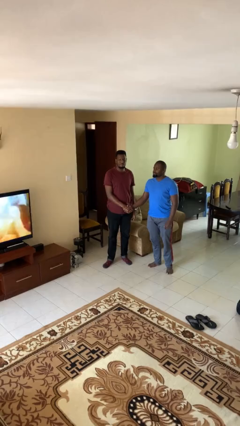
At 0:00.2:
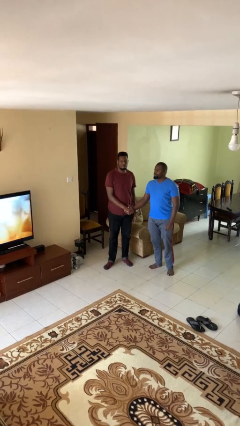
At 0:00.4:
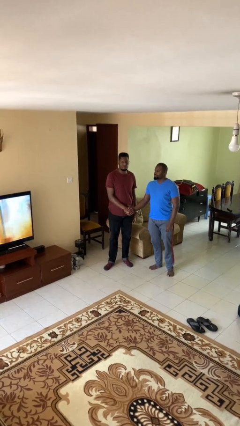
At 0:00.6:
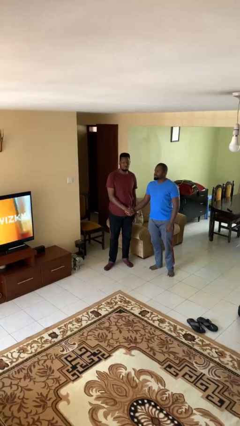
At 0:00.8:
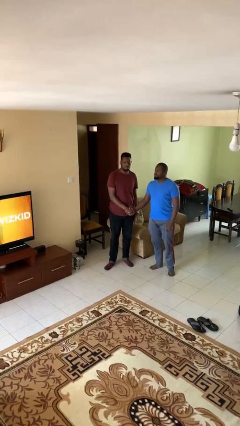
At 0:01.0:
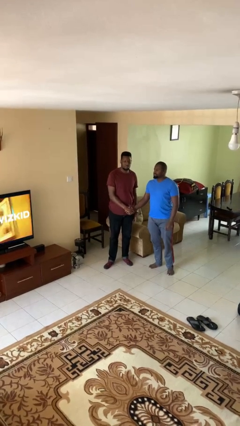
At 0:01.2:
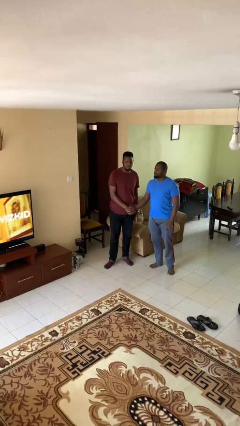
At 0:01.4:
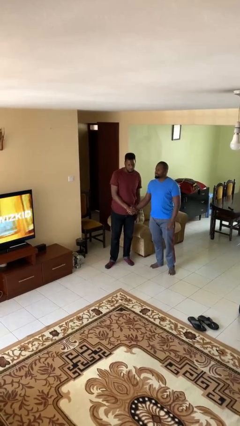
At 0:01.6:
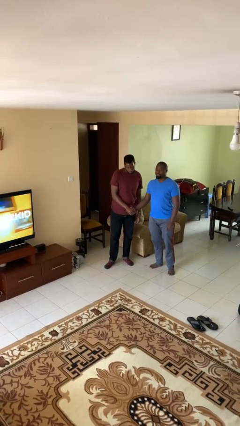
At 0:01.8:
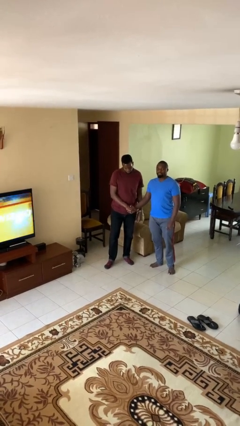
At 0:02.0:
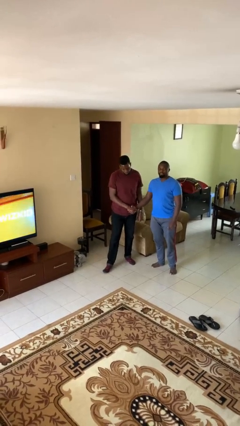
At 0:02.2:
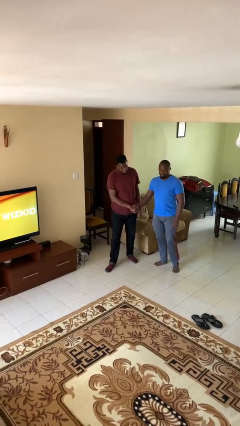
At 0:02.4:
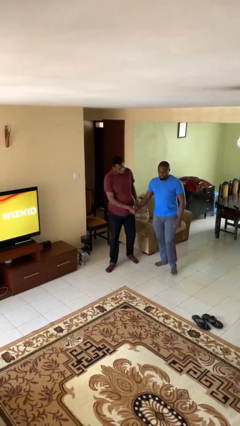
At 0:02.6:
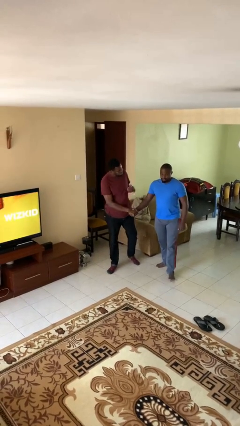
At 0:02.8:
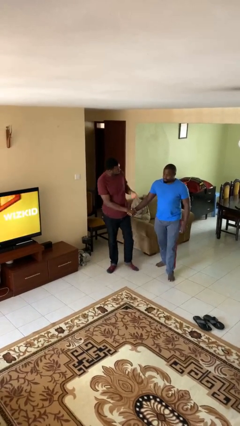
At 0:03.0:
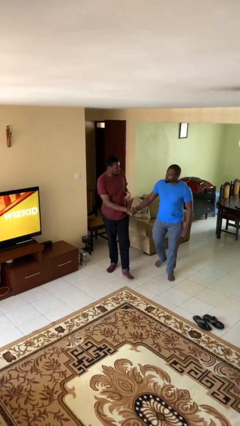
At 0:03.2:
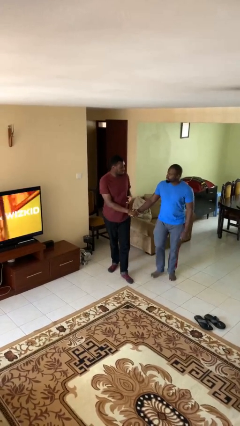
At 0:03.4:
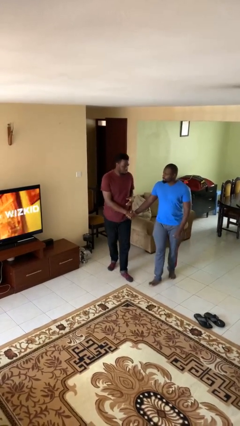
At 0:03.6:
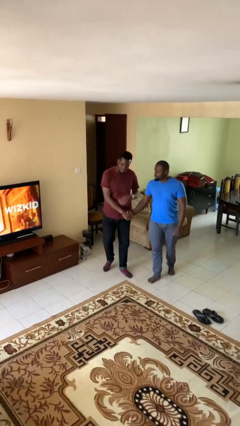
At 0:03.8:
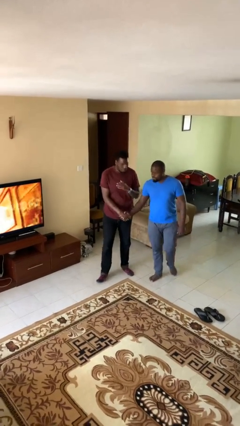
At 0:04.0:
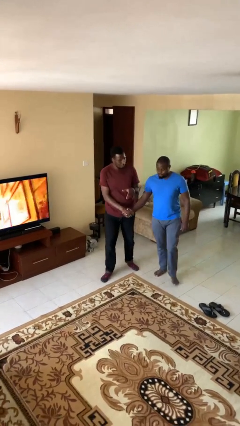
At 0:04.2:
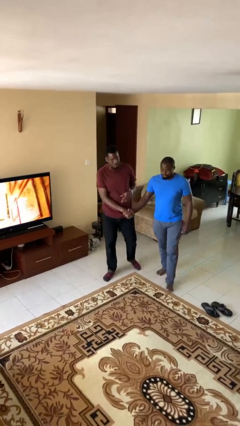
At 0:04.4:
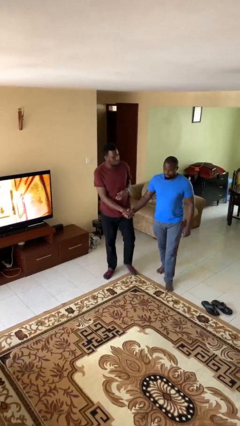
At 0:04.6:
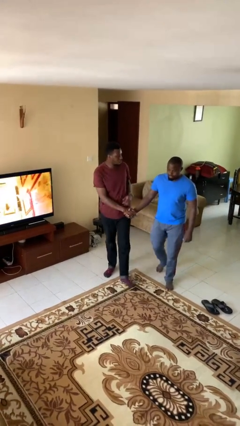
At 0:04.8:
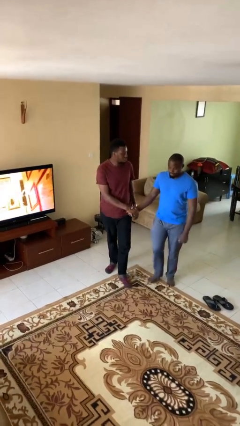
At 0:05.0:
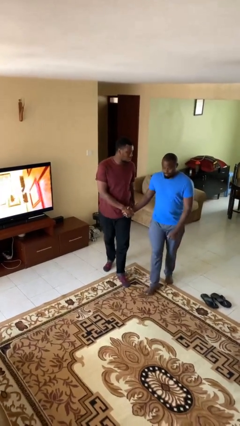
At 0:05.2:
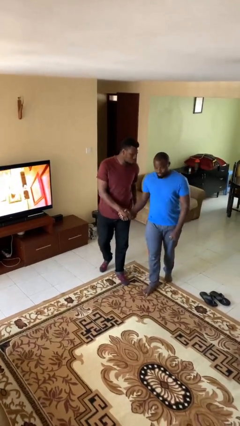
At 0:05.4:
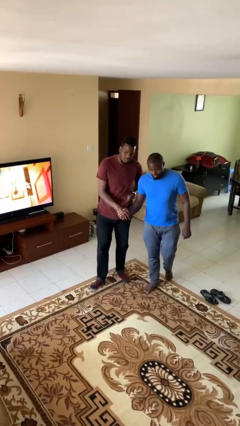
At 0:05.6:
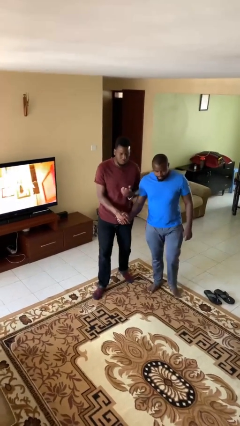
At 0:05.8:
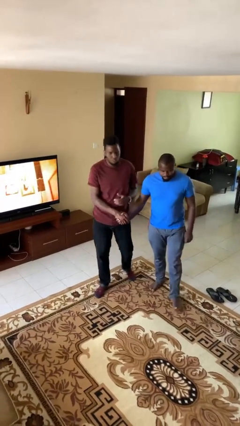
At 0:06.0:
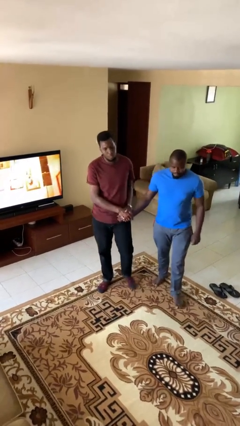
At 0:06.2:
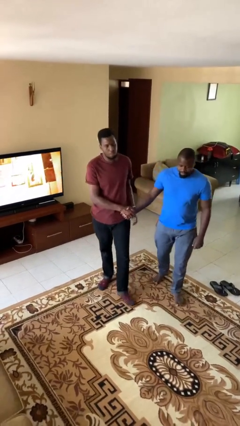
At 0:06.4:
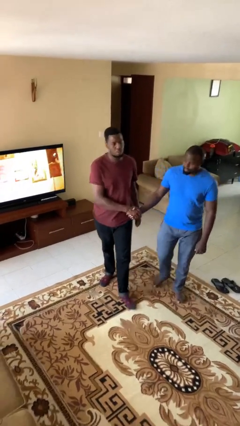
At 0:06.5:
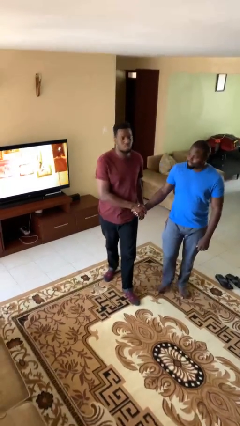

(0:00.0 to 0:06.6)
person holds hand

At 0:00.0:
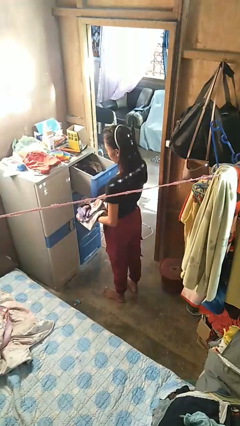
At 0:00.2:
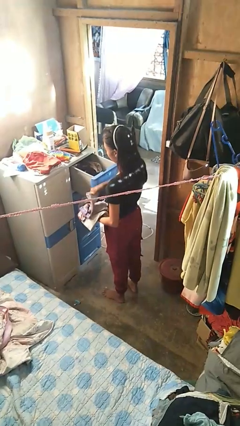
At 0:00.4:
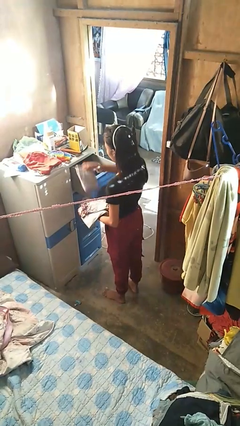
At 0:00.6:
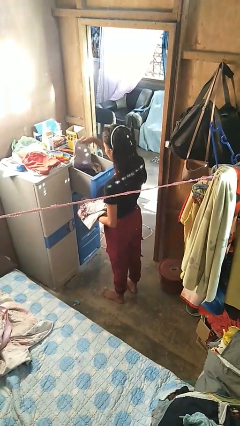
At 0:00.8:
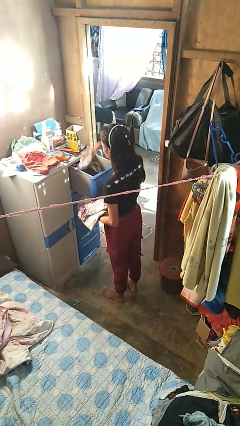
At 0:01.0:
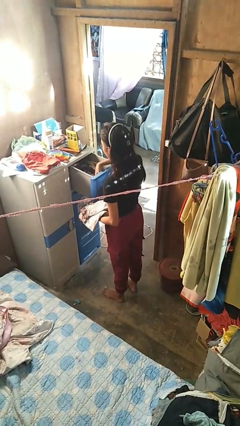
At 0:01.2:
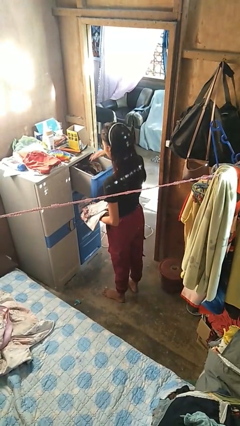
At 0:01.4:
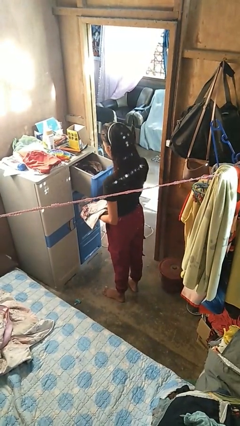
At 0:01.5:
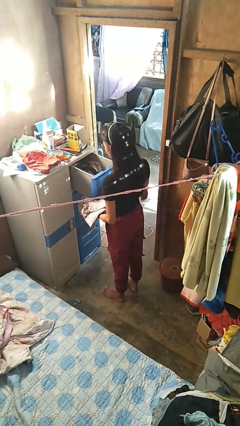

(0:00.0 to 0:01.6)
person puts clothes into dresser

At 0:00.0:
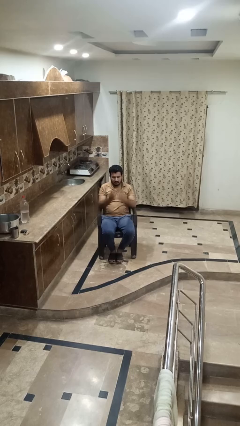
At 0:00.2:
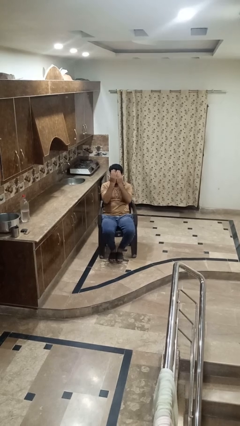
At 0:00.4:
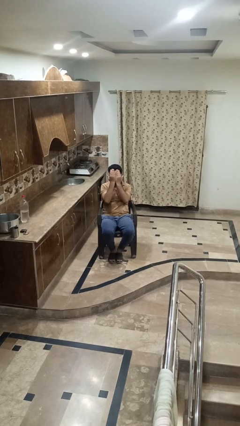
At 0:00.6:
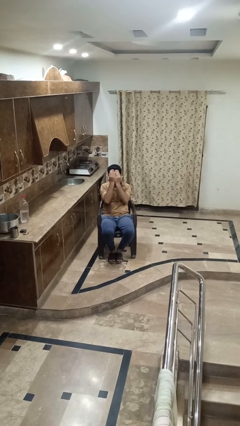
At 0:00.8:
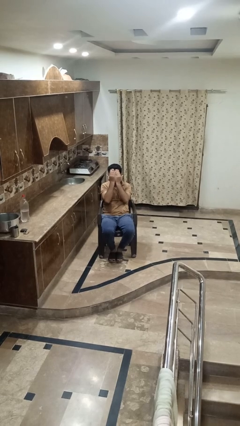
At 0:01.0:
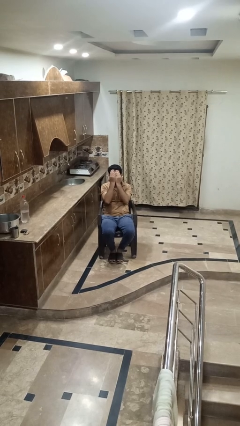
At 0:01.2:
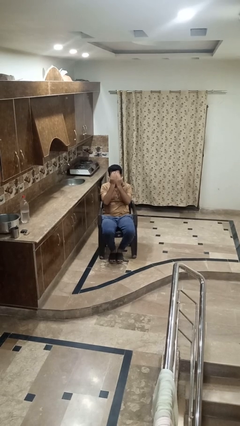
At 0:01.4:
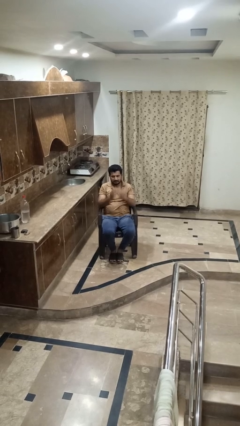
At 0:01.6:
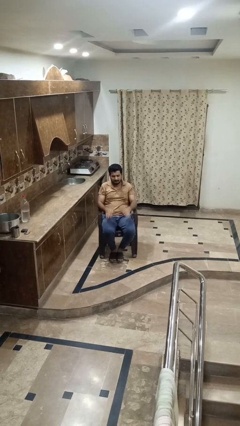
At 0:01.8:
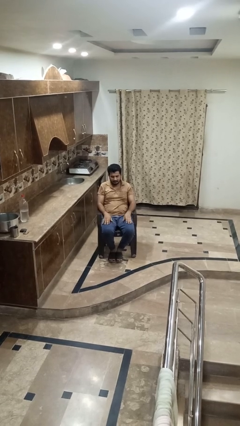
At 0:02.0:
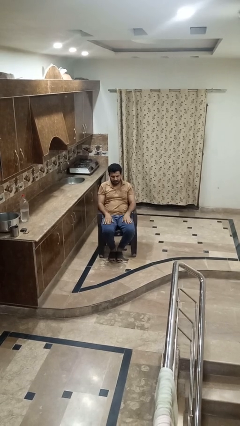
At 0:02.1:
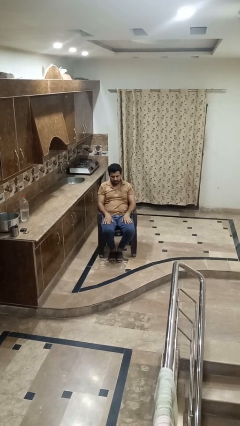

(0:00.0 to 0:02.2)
person covers face with hands

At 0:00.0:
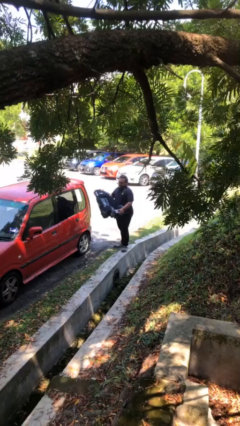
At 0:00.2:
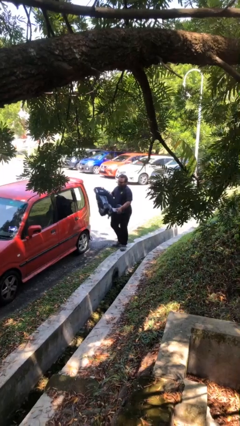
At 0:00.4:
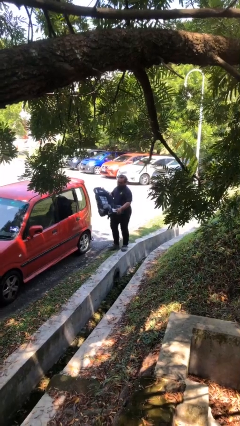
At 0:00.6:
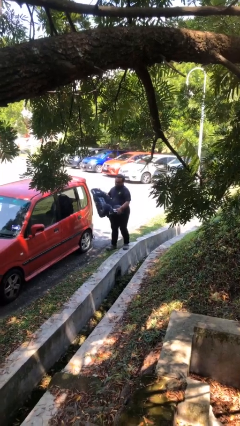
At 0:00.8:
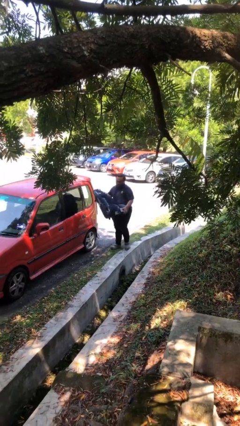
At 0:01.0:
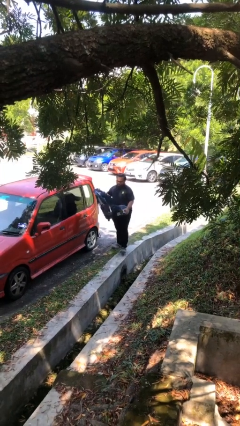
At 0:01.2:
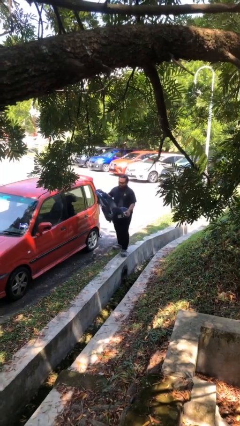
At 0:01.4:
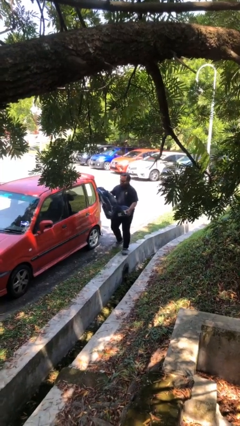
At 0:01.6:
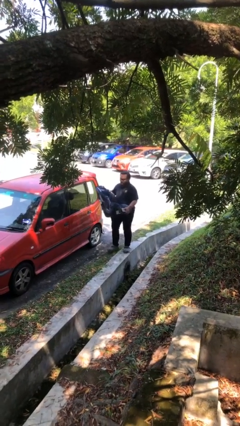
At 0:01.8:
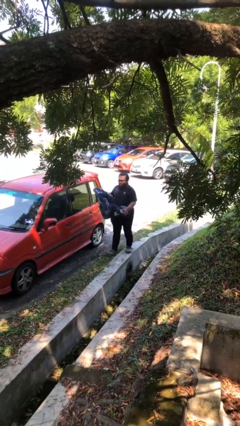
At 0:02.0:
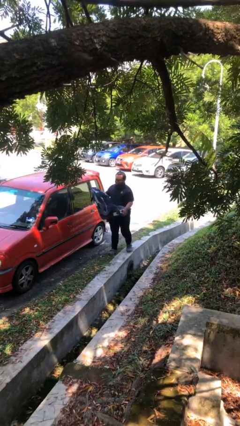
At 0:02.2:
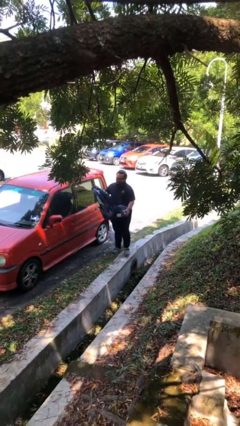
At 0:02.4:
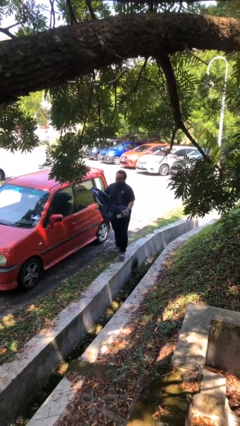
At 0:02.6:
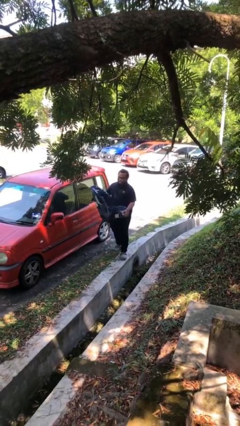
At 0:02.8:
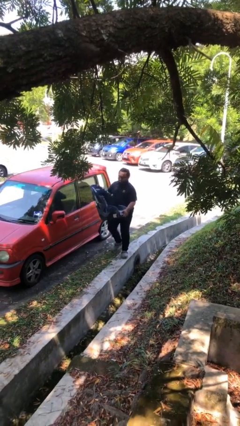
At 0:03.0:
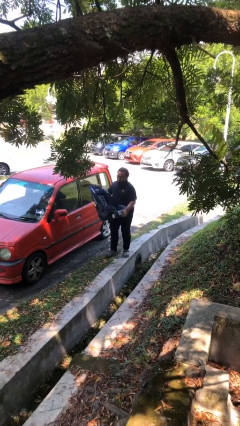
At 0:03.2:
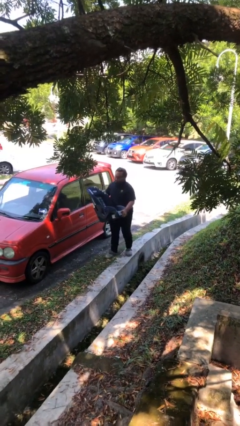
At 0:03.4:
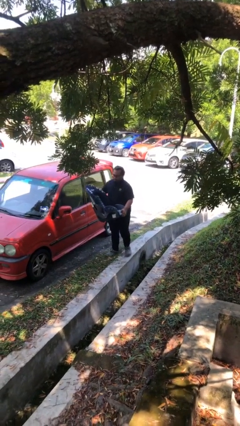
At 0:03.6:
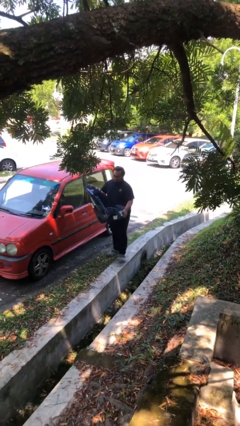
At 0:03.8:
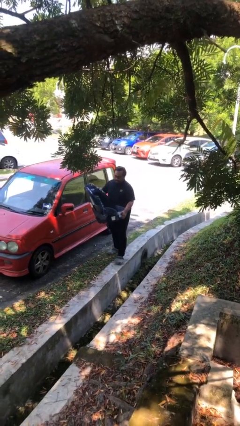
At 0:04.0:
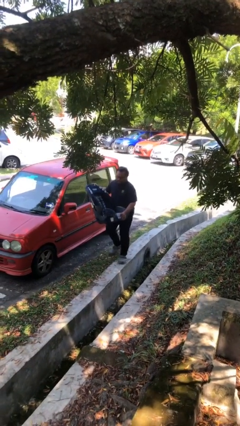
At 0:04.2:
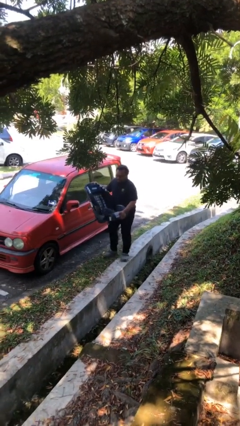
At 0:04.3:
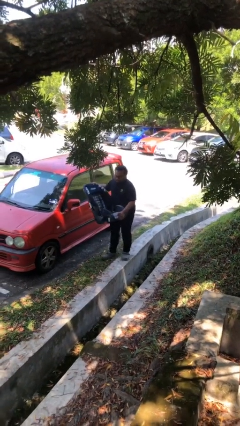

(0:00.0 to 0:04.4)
person carries heavy object

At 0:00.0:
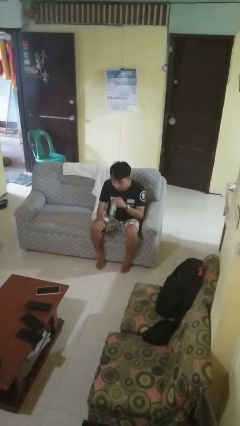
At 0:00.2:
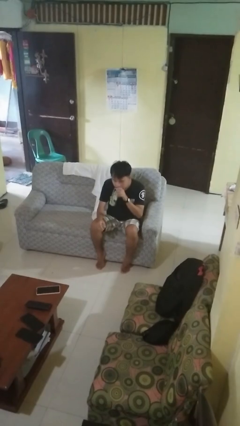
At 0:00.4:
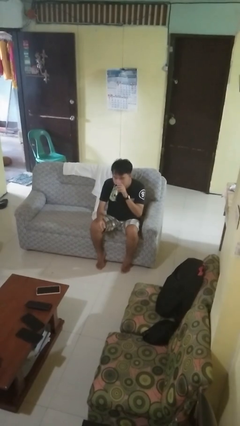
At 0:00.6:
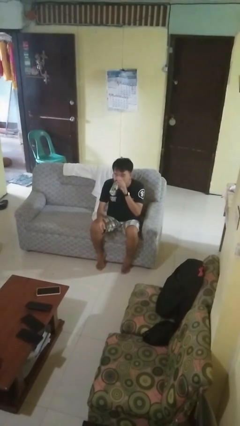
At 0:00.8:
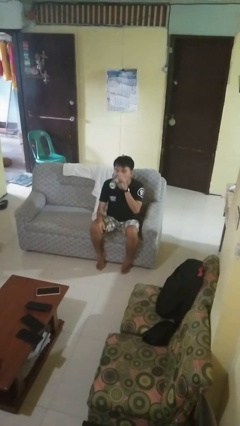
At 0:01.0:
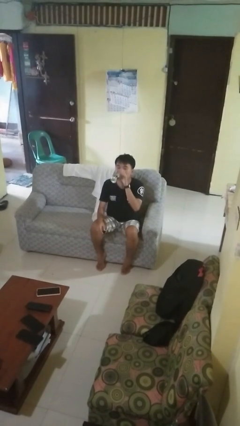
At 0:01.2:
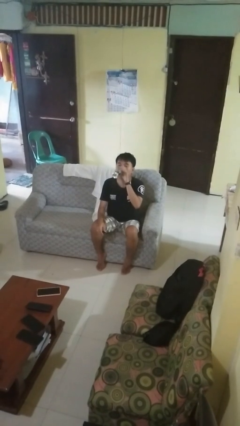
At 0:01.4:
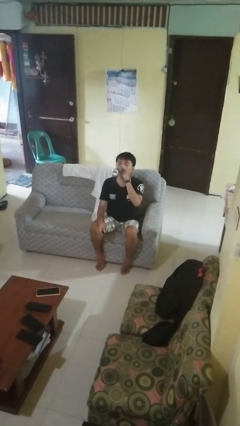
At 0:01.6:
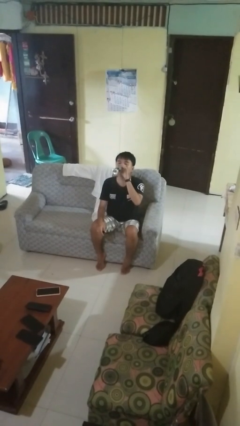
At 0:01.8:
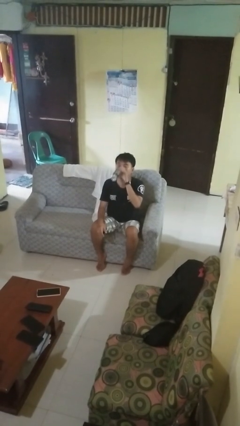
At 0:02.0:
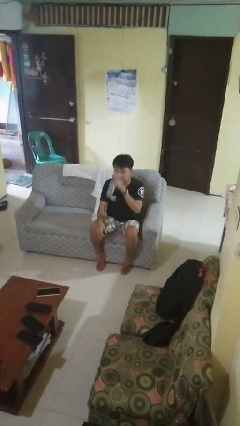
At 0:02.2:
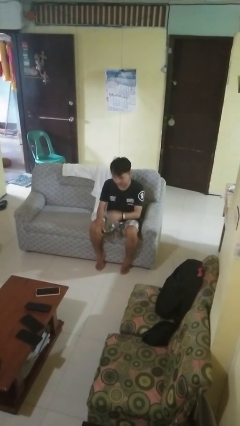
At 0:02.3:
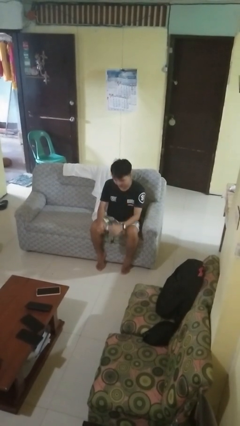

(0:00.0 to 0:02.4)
person drinks from beverage can

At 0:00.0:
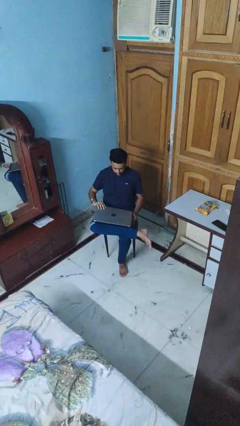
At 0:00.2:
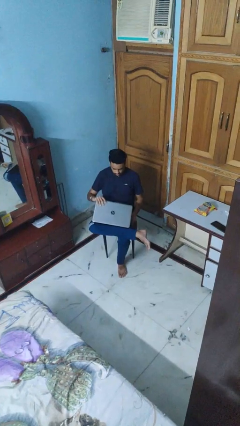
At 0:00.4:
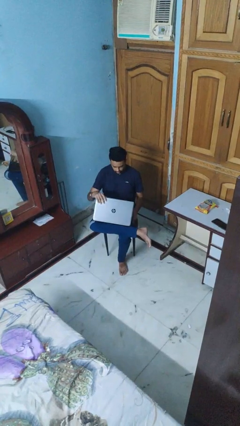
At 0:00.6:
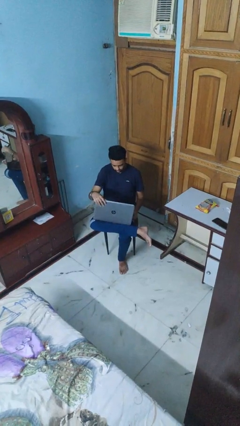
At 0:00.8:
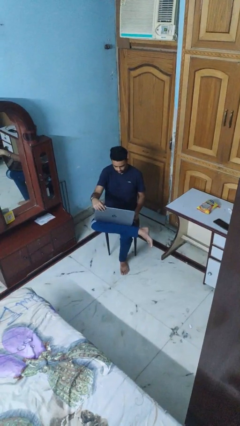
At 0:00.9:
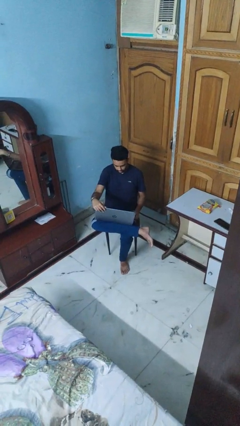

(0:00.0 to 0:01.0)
person opens laptop
